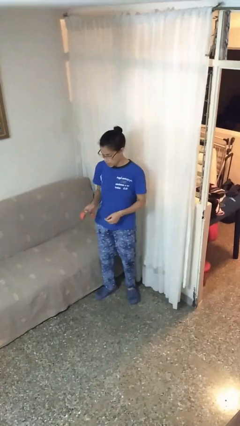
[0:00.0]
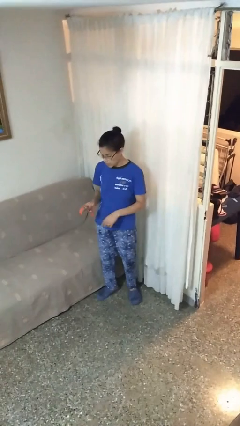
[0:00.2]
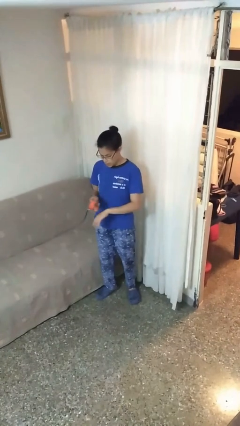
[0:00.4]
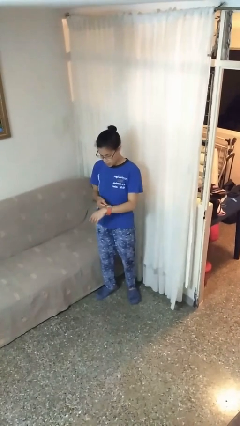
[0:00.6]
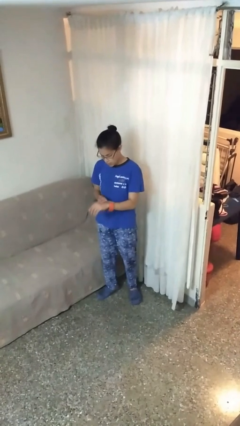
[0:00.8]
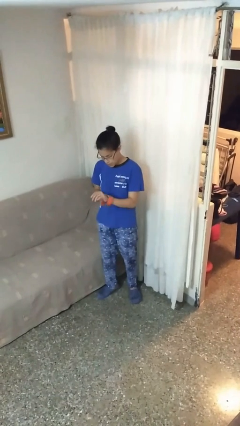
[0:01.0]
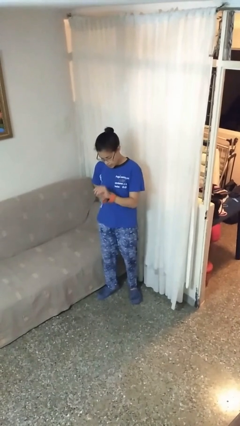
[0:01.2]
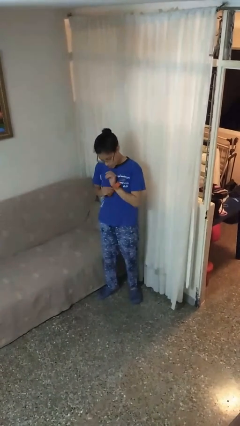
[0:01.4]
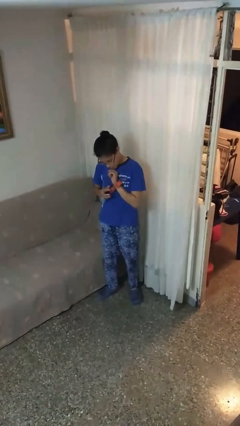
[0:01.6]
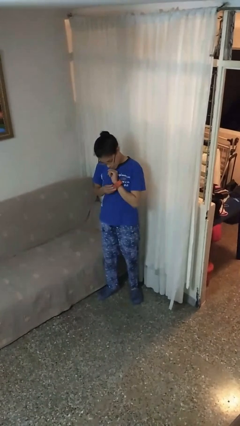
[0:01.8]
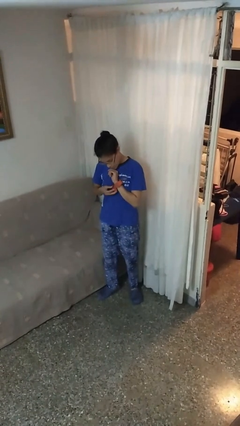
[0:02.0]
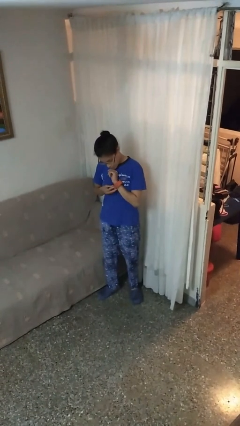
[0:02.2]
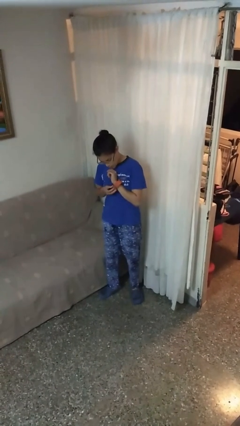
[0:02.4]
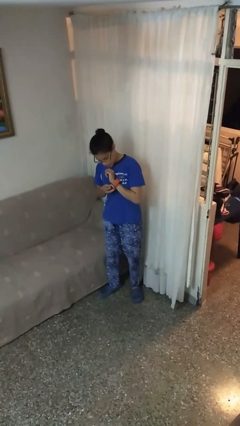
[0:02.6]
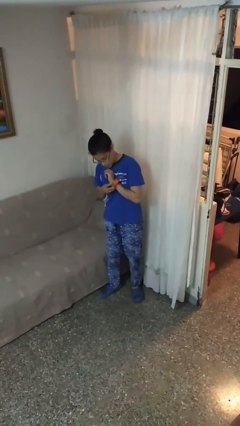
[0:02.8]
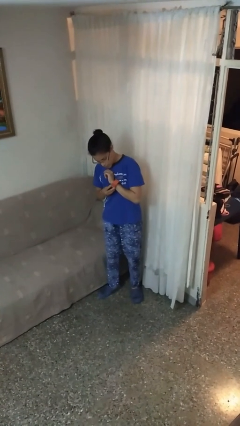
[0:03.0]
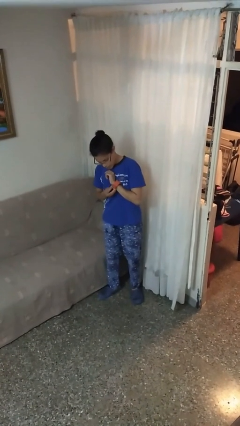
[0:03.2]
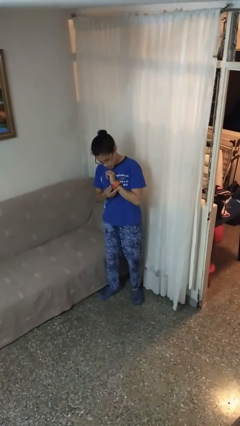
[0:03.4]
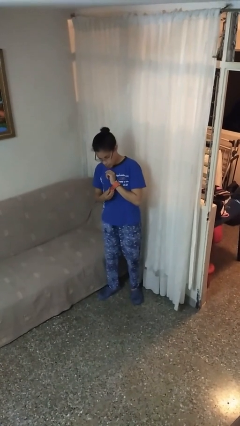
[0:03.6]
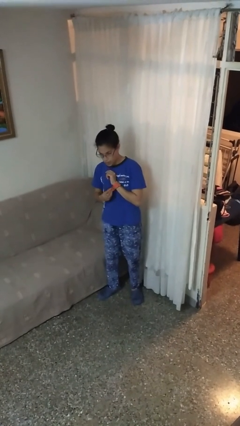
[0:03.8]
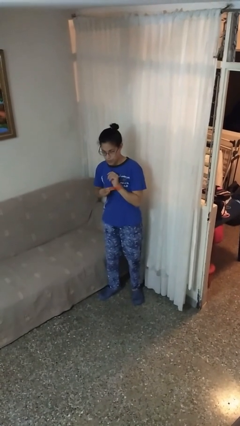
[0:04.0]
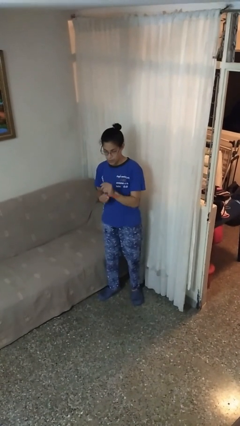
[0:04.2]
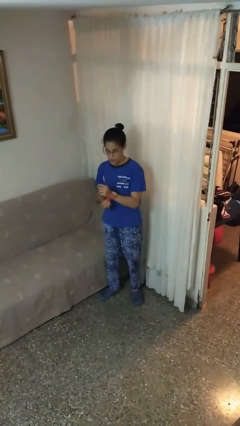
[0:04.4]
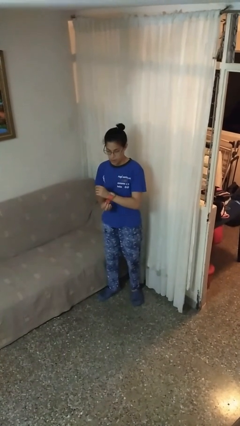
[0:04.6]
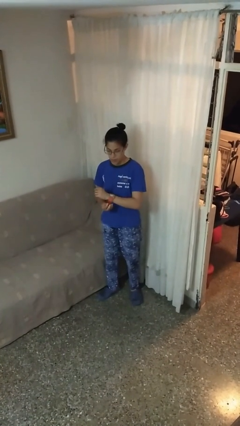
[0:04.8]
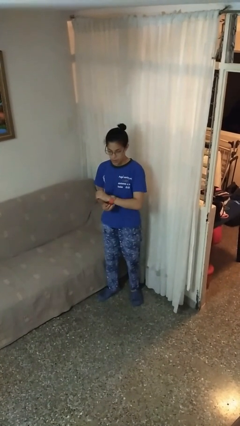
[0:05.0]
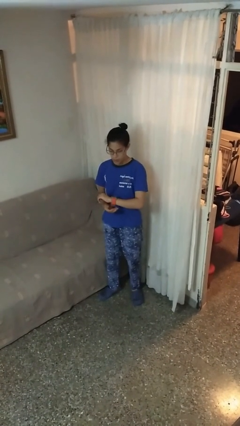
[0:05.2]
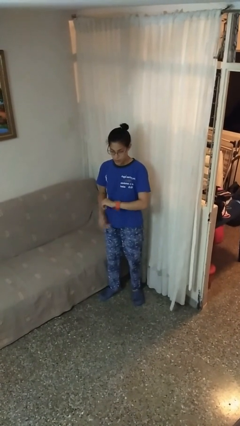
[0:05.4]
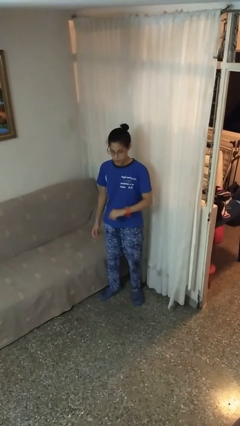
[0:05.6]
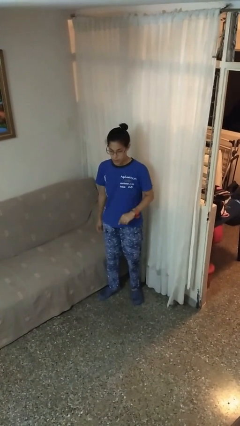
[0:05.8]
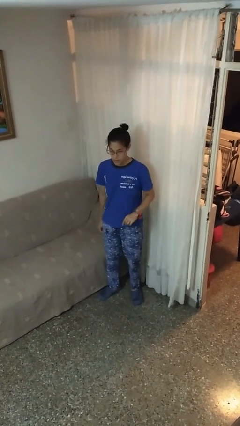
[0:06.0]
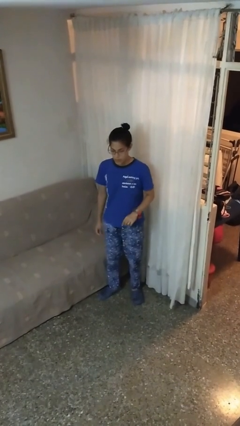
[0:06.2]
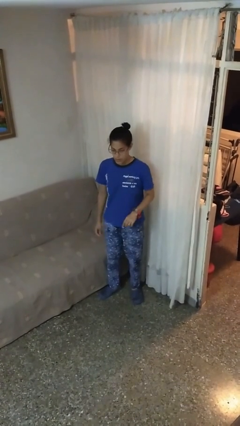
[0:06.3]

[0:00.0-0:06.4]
person puts on wristwatch

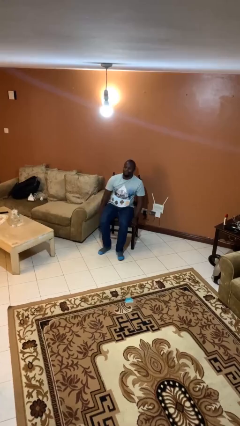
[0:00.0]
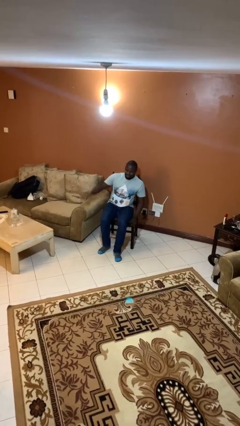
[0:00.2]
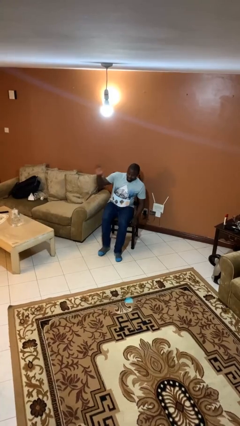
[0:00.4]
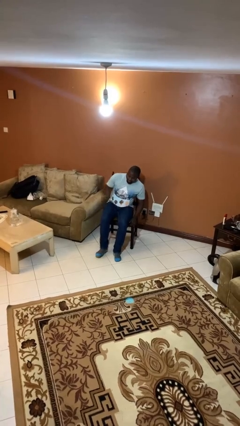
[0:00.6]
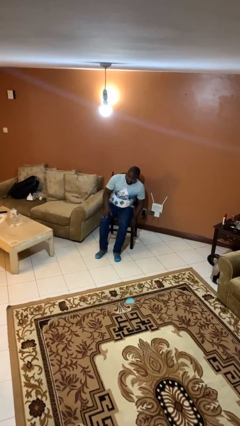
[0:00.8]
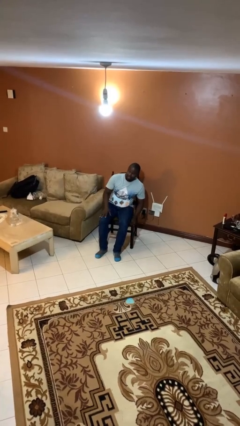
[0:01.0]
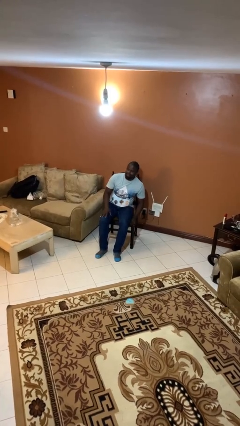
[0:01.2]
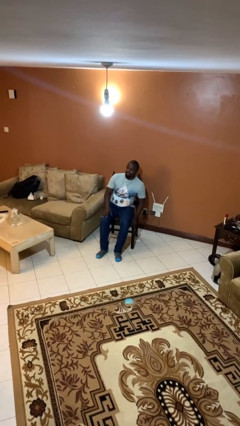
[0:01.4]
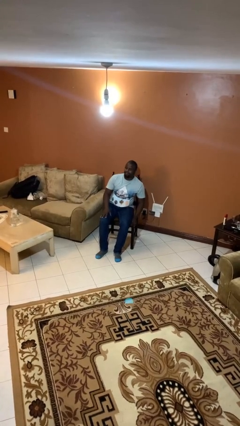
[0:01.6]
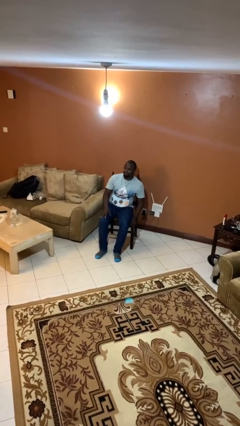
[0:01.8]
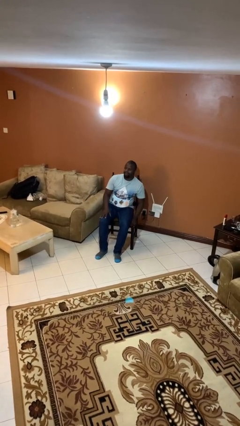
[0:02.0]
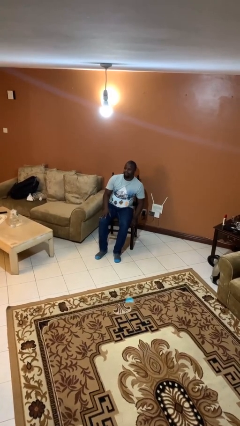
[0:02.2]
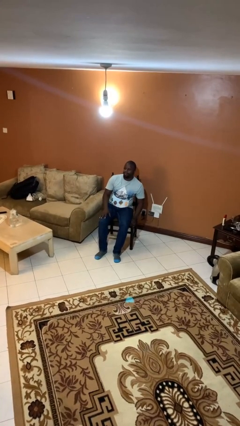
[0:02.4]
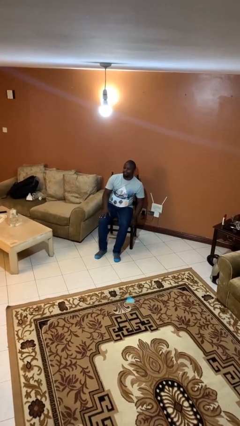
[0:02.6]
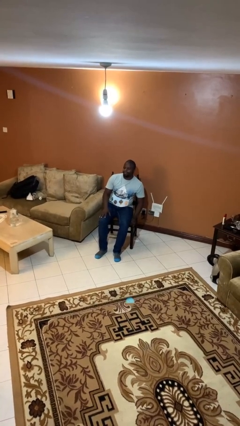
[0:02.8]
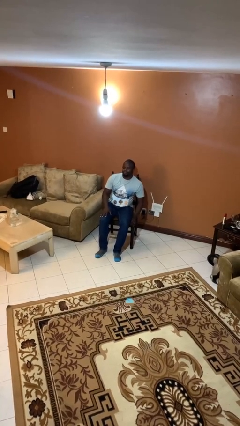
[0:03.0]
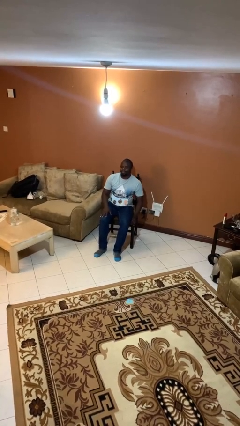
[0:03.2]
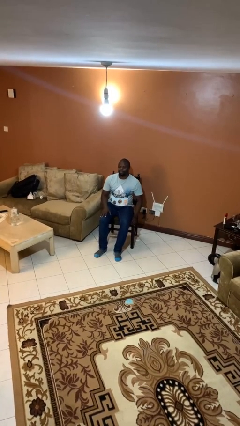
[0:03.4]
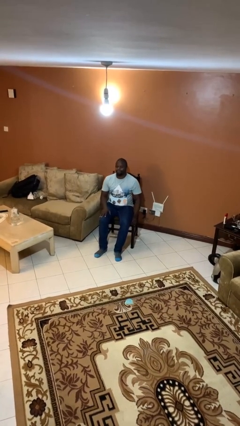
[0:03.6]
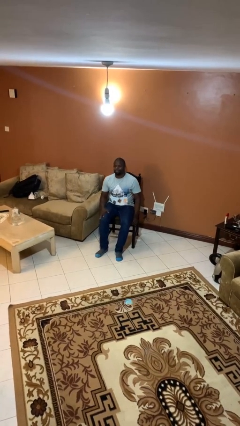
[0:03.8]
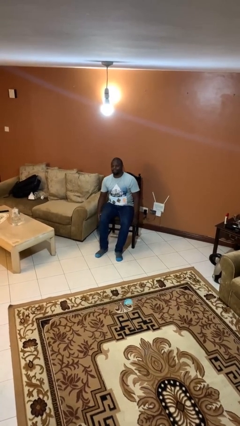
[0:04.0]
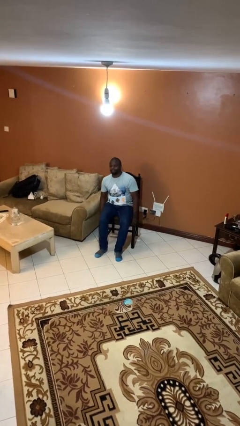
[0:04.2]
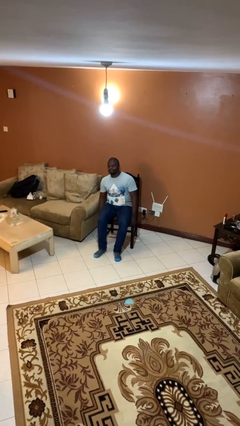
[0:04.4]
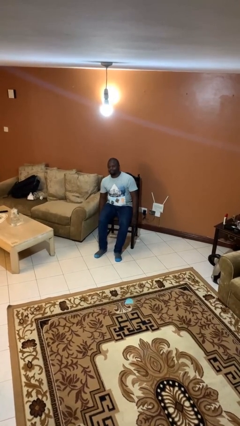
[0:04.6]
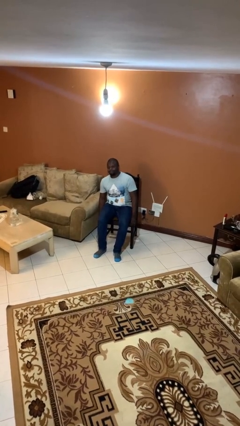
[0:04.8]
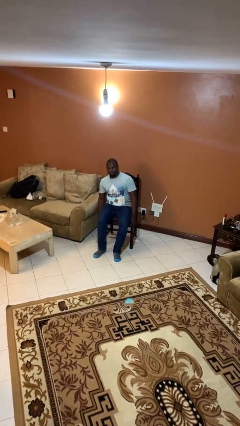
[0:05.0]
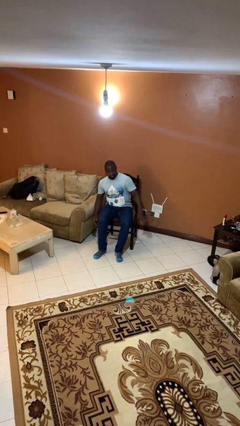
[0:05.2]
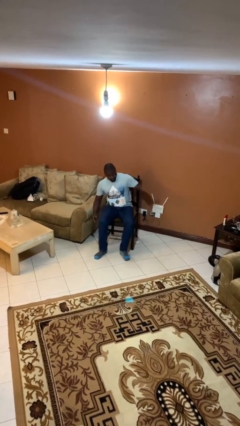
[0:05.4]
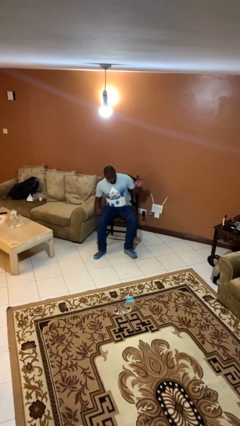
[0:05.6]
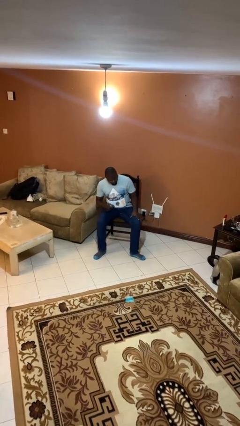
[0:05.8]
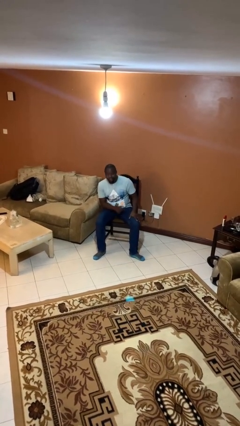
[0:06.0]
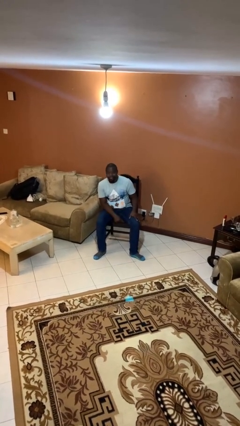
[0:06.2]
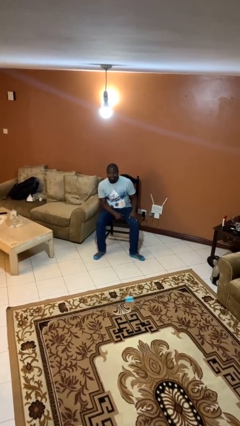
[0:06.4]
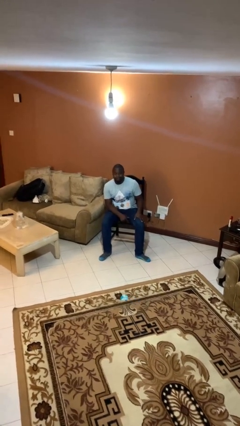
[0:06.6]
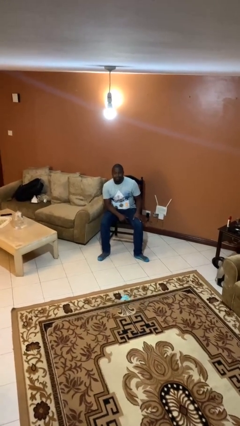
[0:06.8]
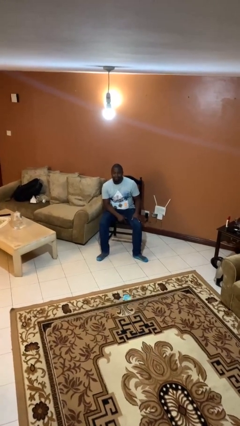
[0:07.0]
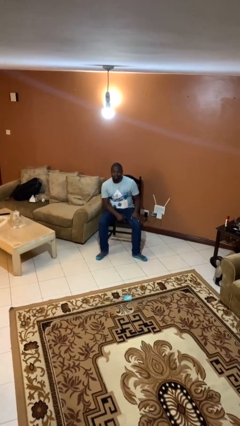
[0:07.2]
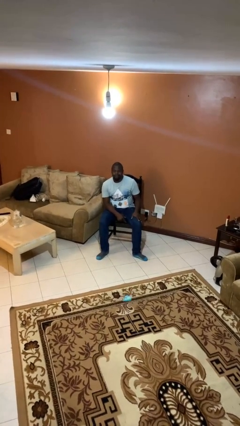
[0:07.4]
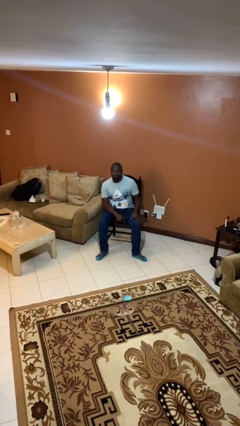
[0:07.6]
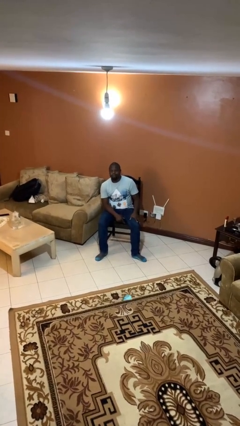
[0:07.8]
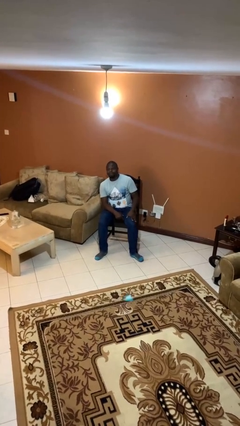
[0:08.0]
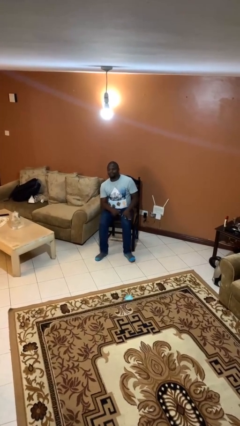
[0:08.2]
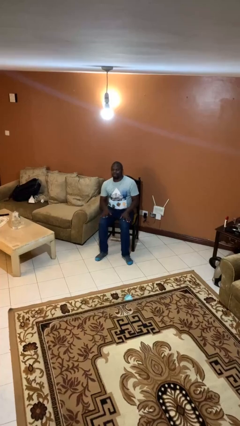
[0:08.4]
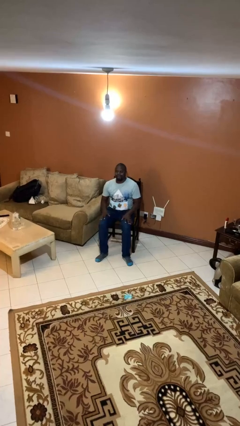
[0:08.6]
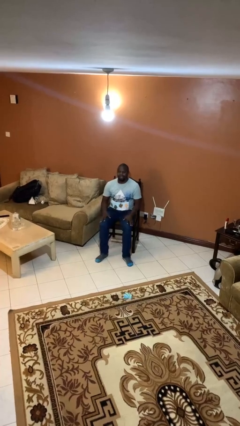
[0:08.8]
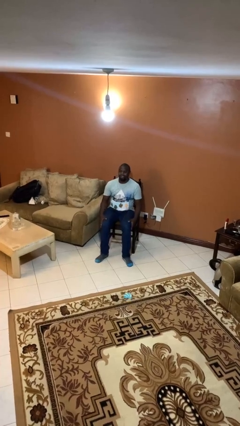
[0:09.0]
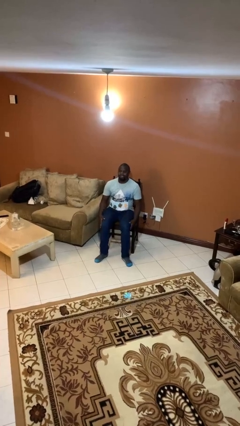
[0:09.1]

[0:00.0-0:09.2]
person slaps hands on thighs

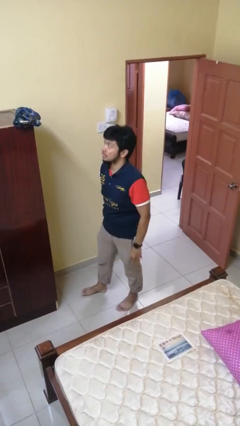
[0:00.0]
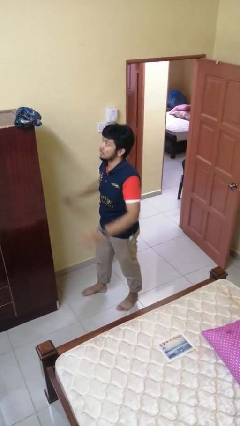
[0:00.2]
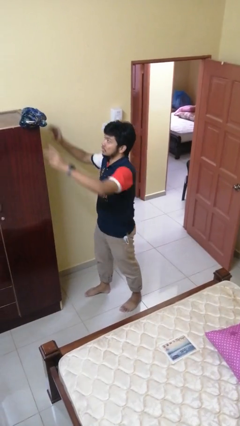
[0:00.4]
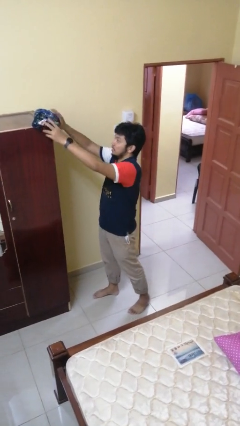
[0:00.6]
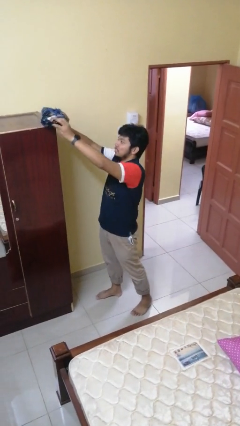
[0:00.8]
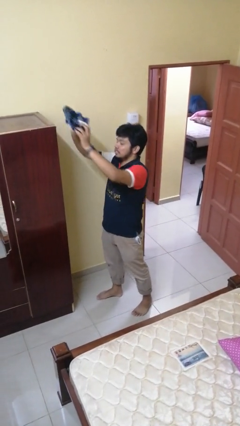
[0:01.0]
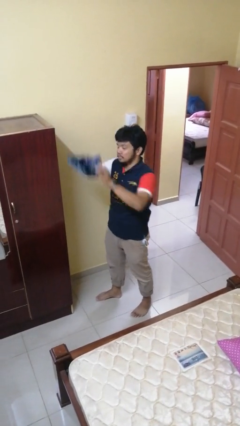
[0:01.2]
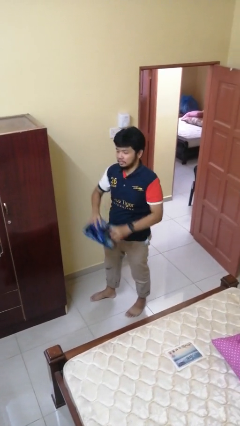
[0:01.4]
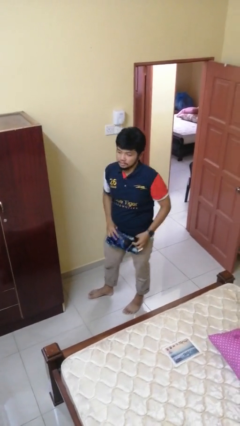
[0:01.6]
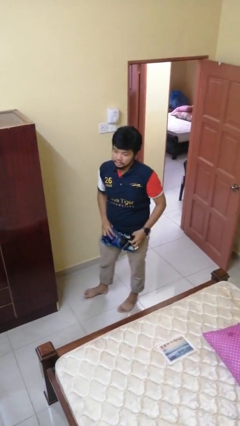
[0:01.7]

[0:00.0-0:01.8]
person picks up object from countertop

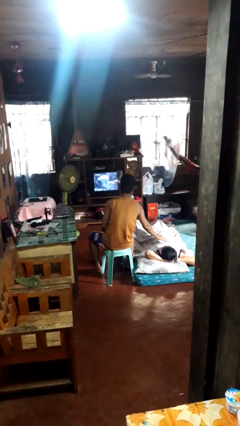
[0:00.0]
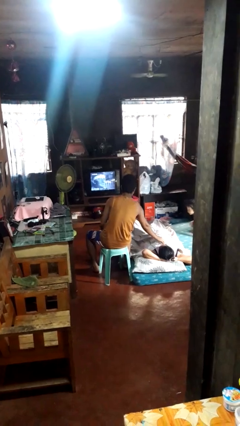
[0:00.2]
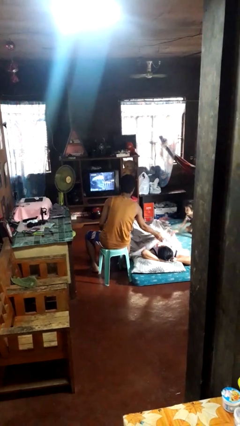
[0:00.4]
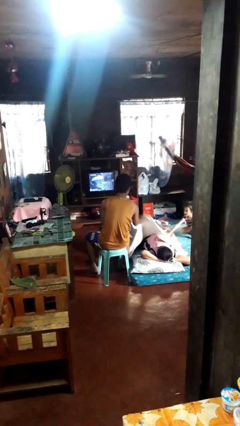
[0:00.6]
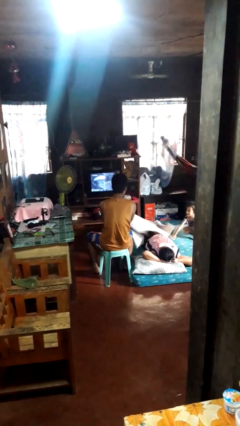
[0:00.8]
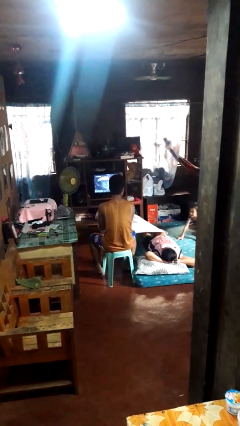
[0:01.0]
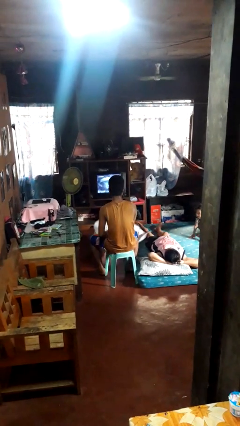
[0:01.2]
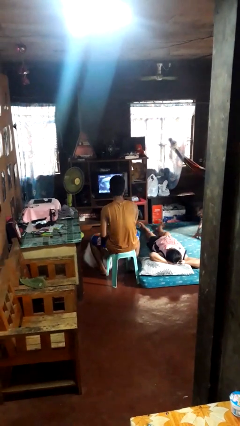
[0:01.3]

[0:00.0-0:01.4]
person uncovers friend with blanket
